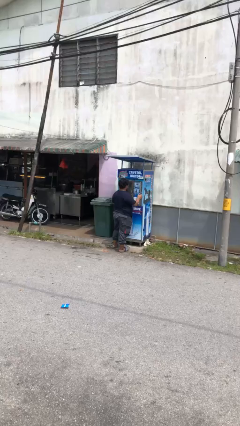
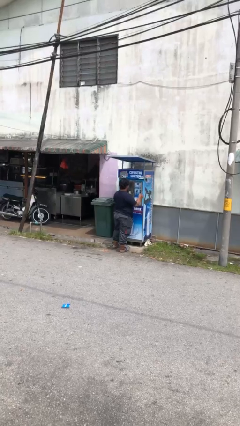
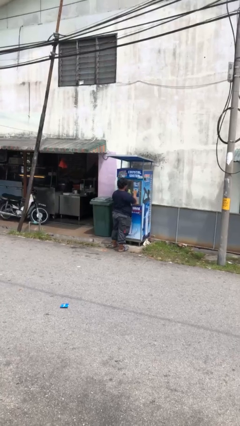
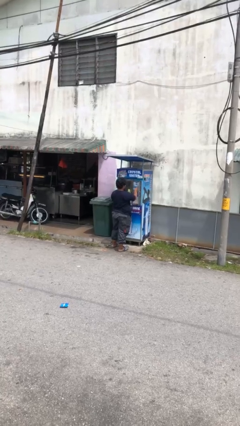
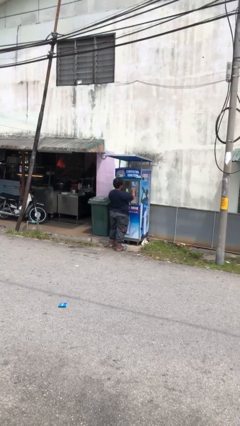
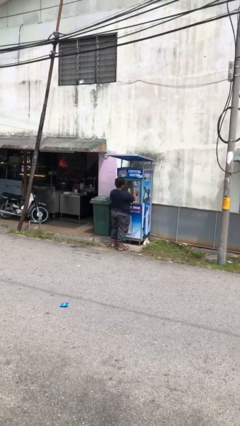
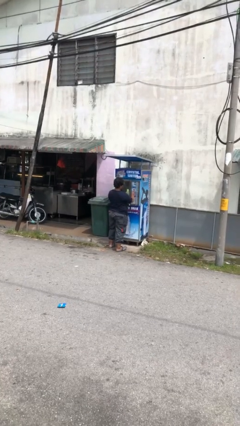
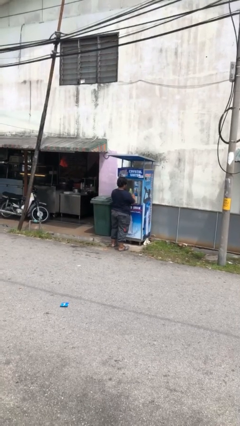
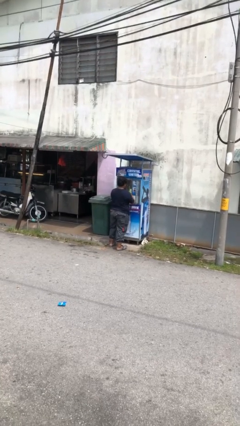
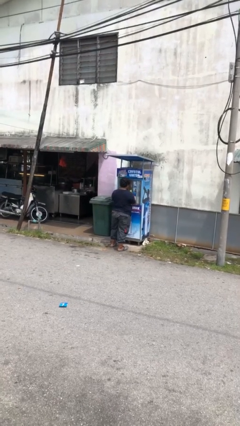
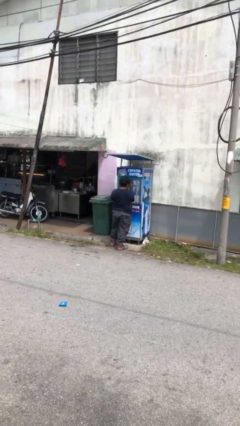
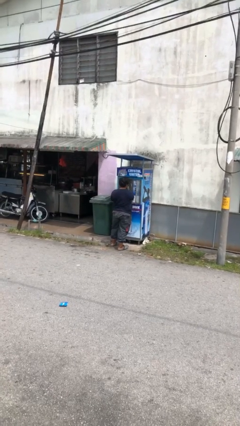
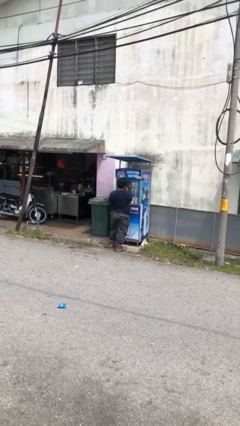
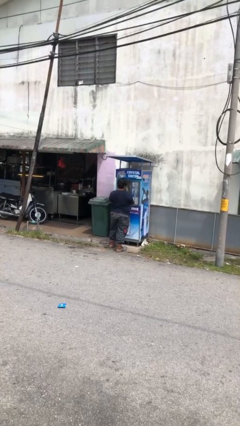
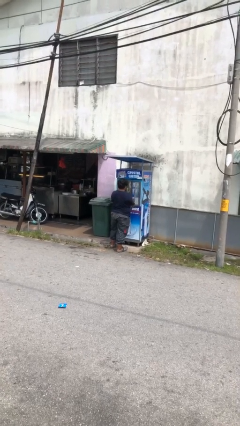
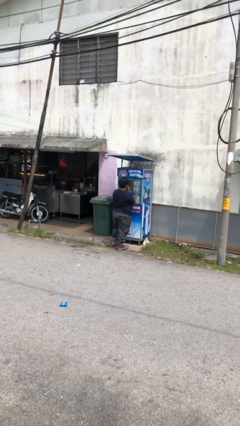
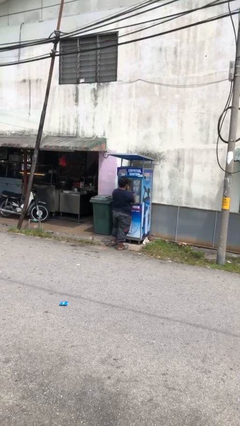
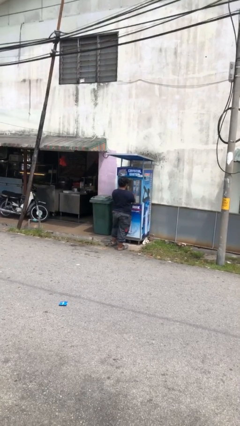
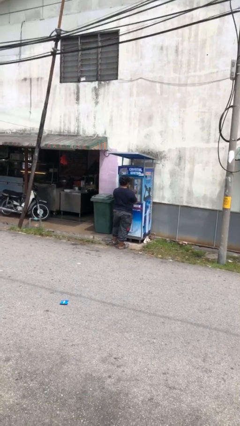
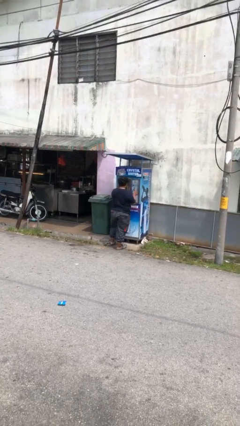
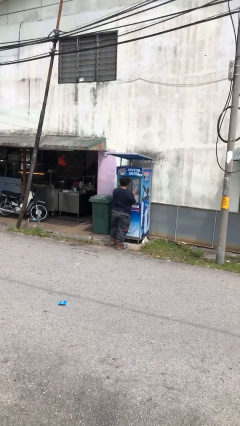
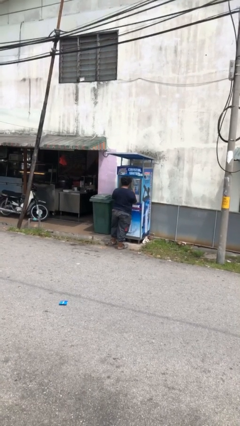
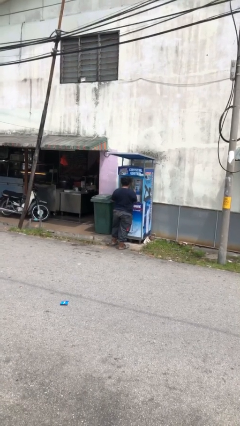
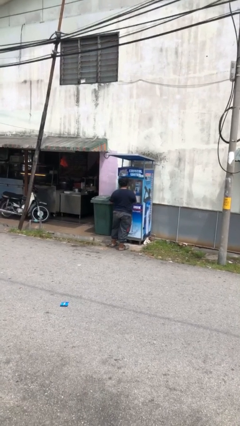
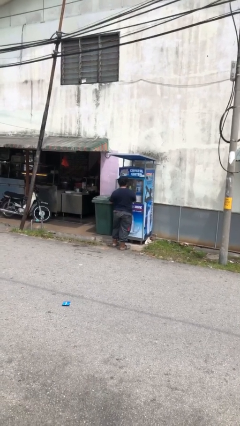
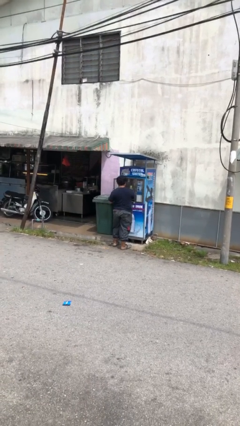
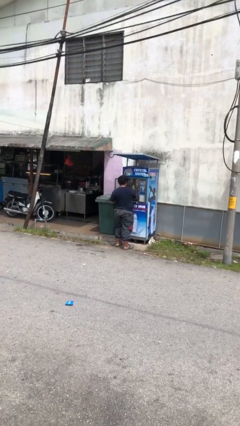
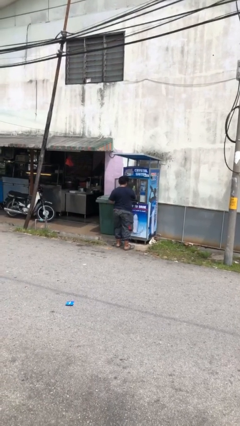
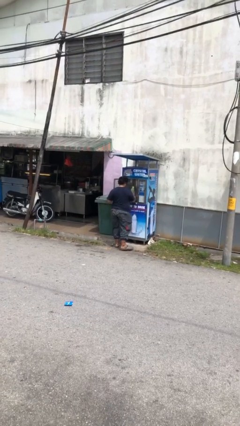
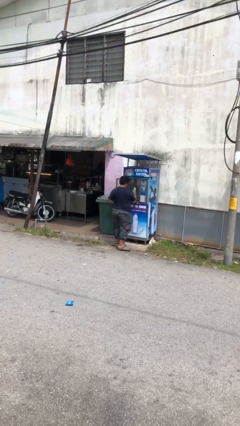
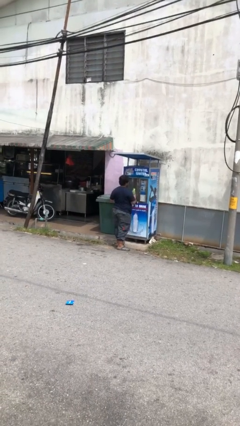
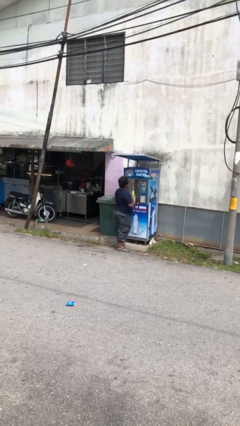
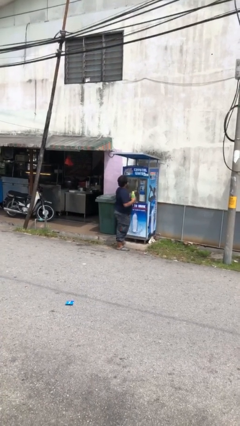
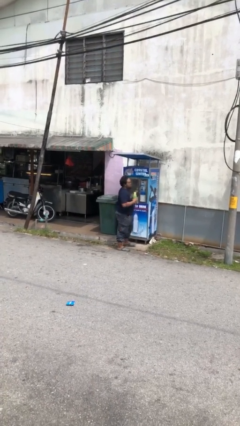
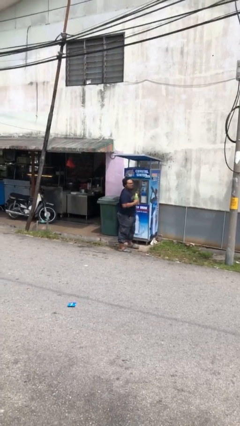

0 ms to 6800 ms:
person purchases from machine

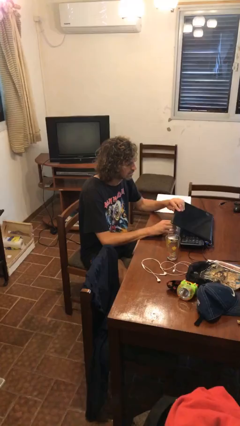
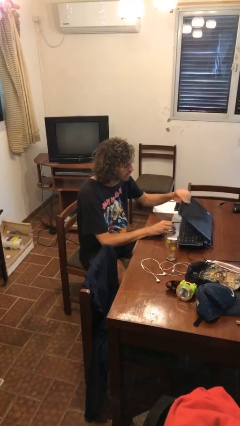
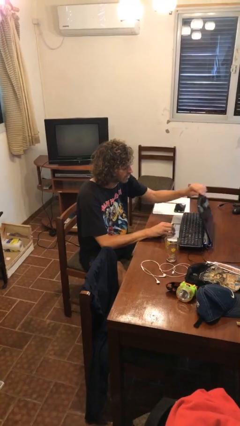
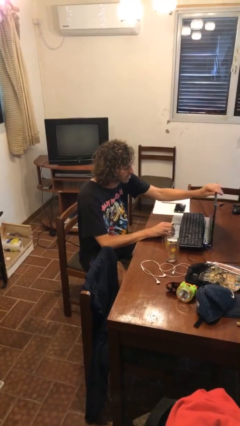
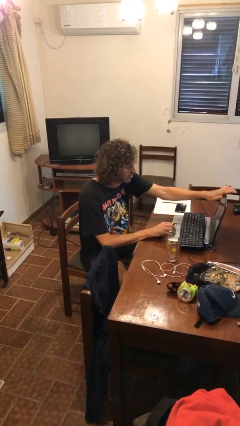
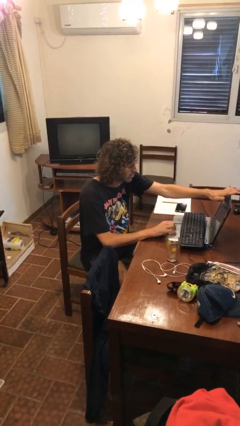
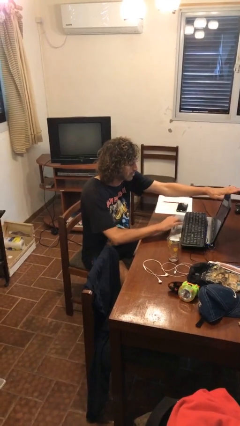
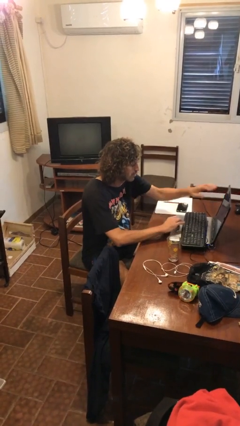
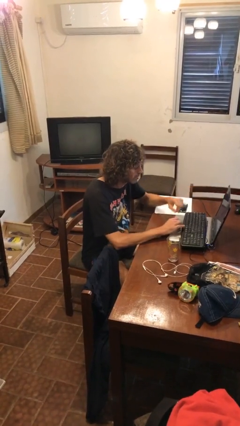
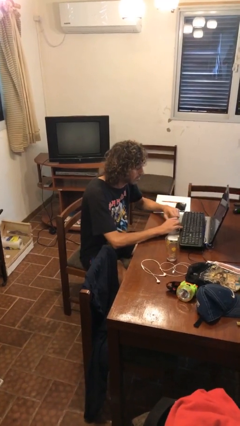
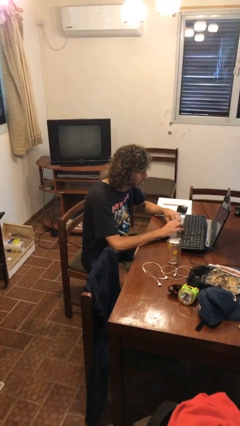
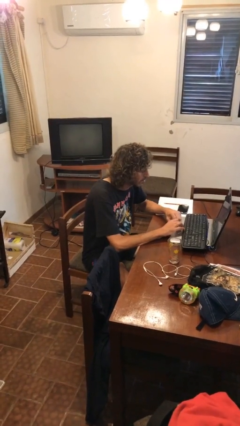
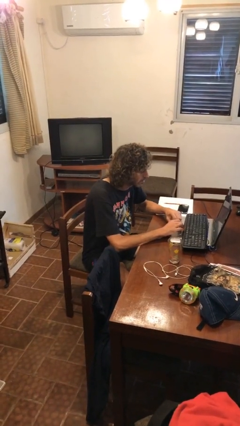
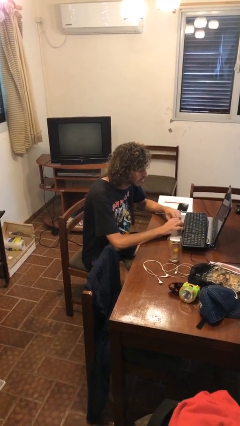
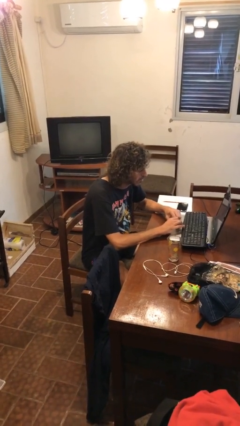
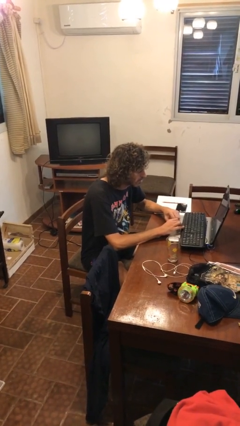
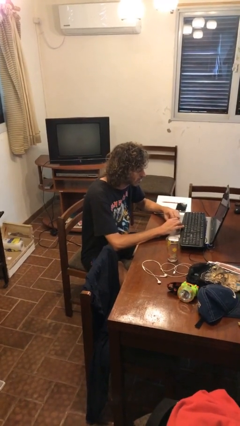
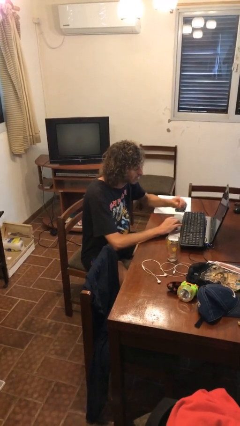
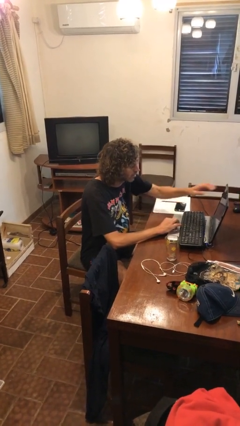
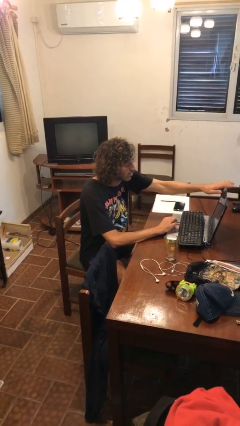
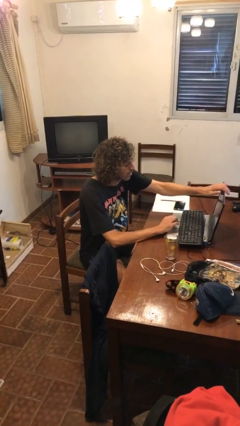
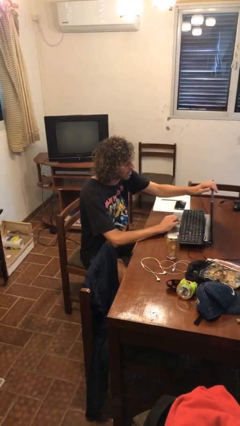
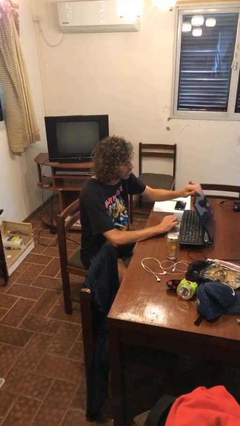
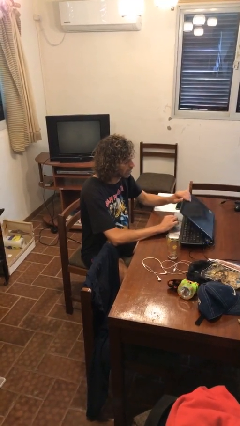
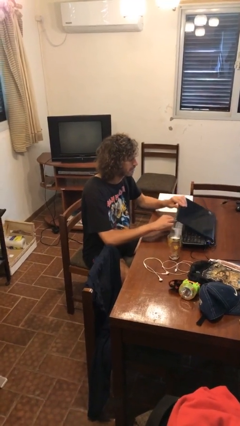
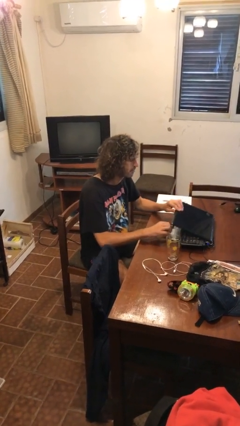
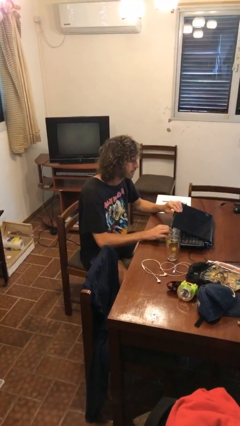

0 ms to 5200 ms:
person interacts with laptop

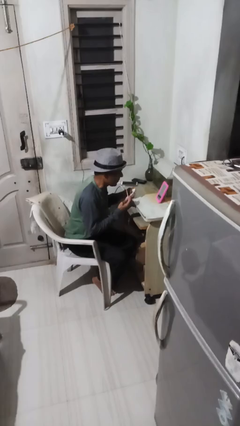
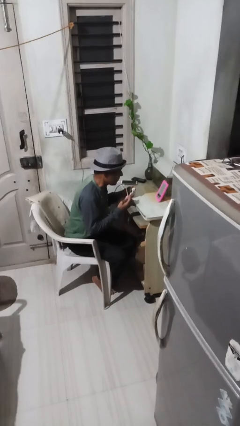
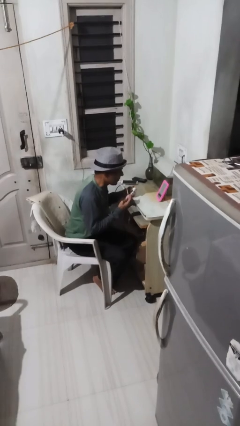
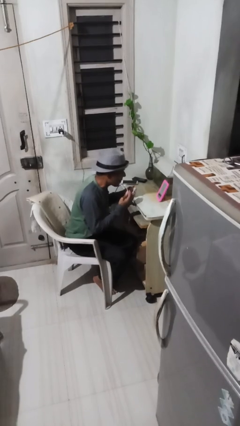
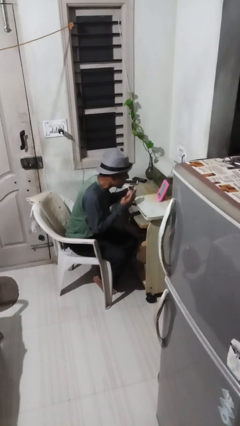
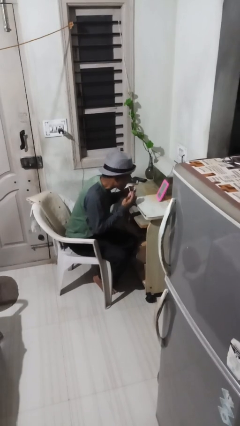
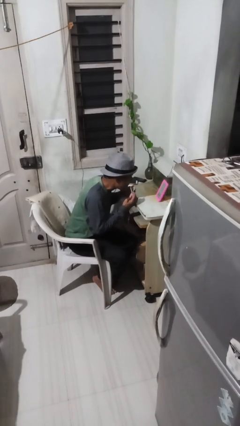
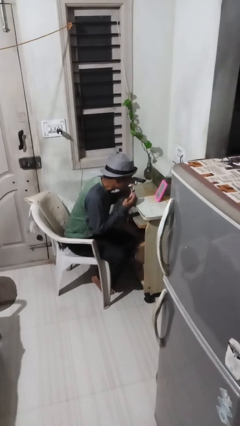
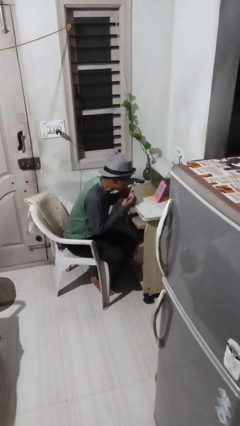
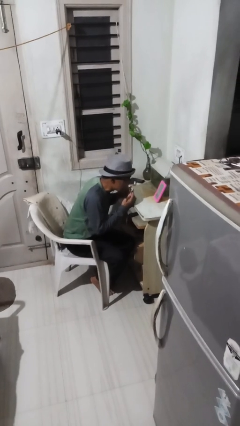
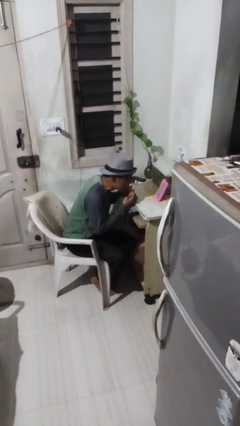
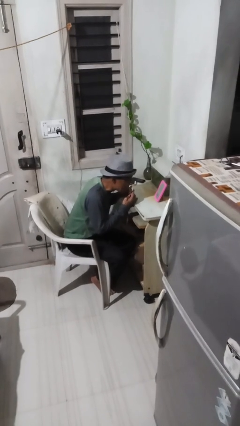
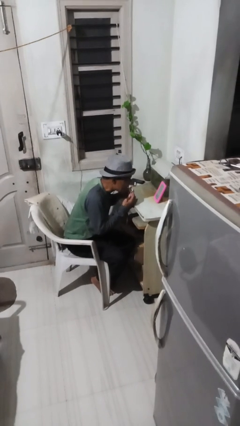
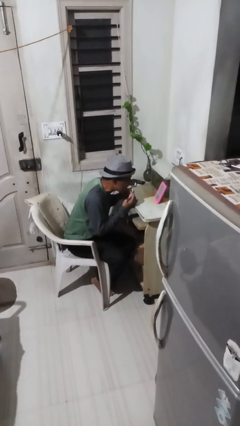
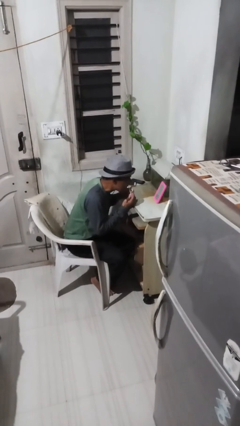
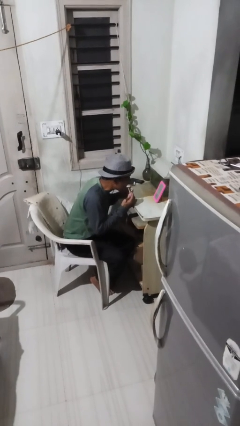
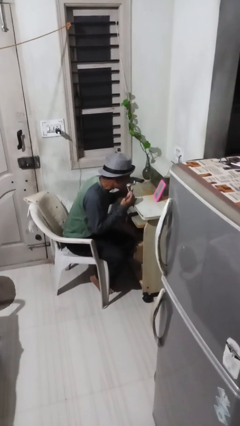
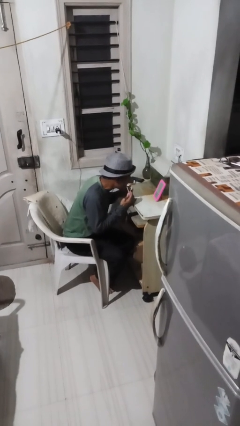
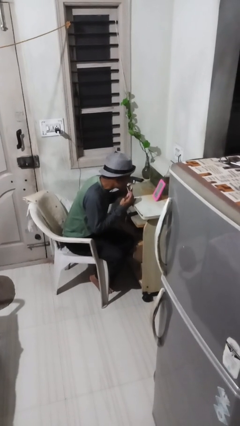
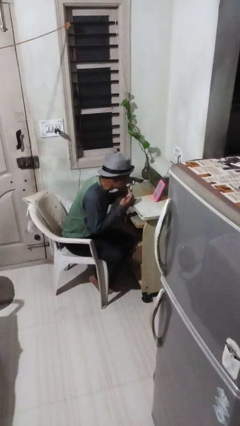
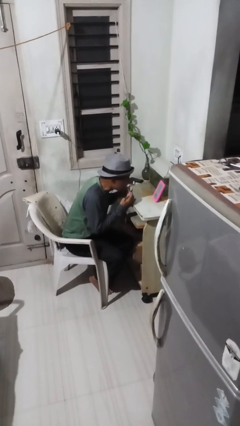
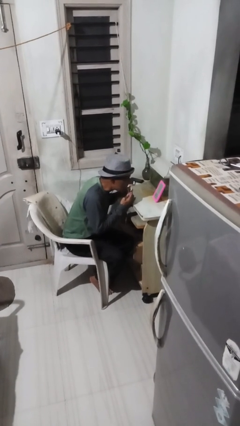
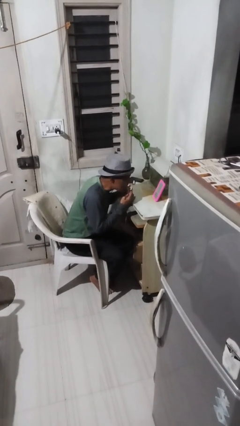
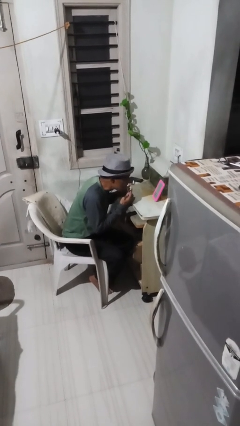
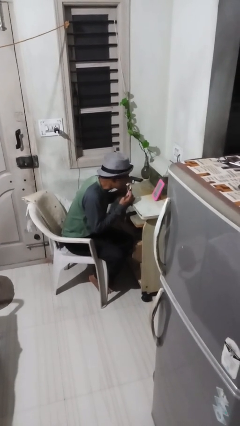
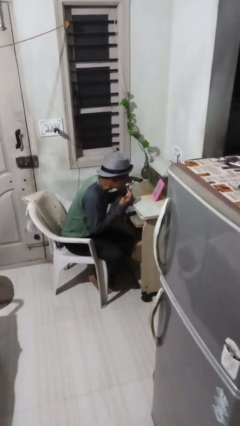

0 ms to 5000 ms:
person applies lip makeup

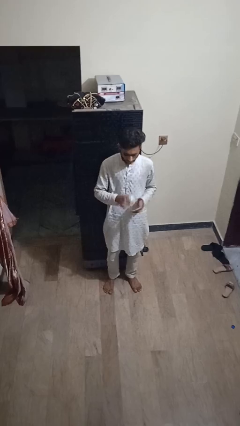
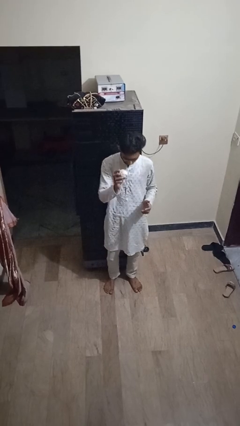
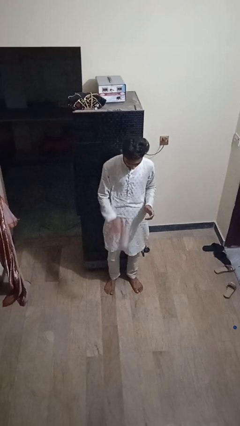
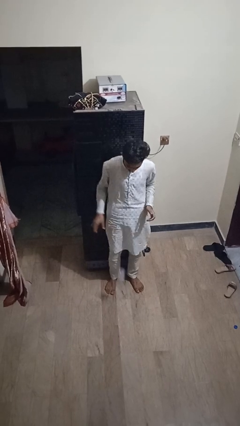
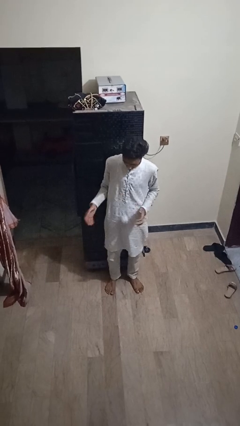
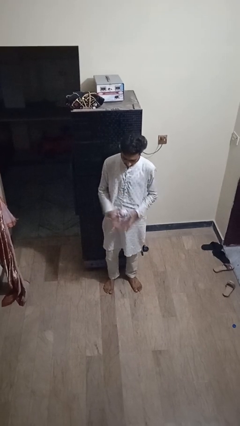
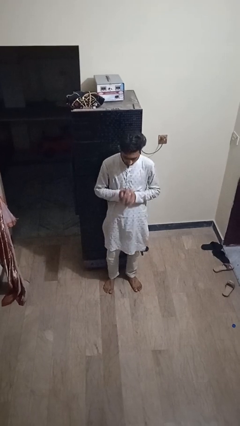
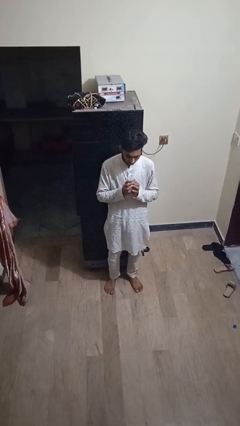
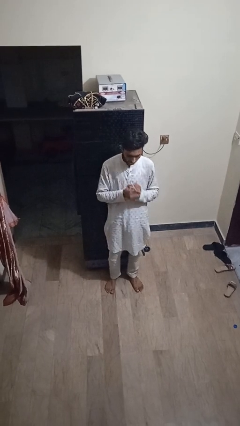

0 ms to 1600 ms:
person bounces ball on floor
